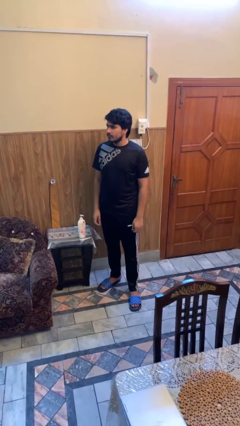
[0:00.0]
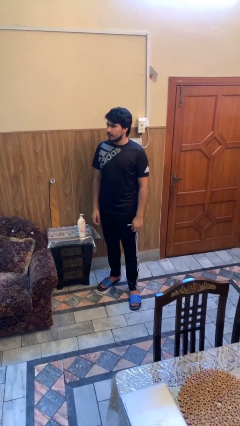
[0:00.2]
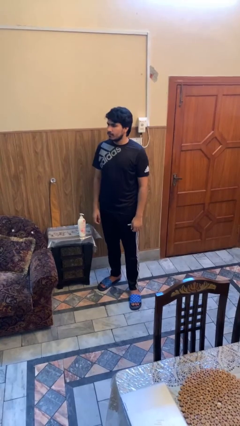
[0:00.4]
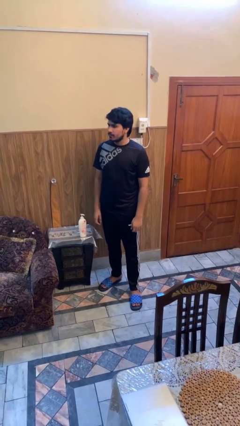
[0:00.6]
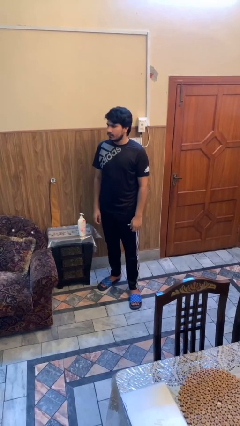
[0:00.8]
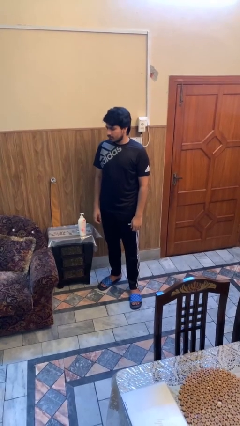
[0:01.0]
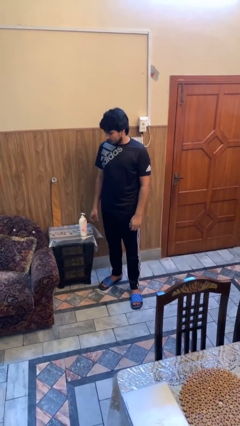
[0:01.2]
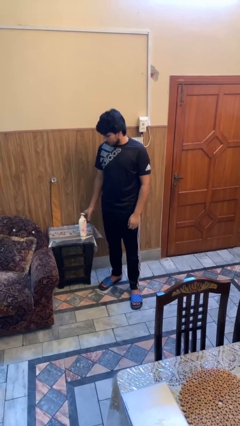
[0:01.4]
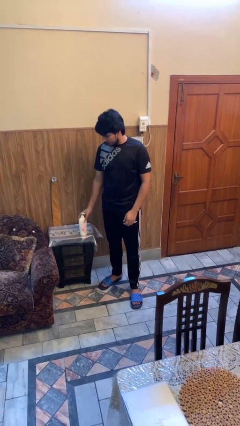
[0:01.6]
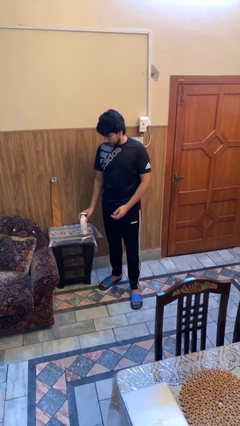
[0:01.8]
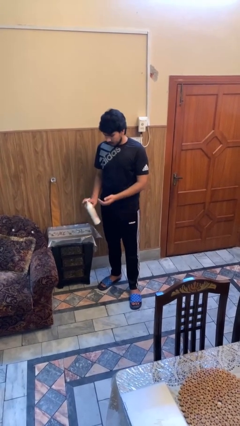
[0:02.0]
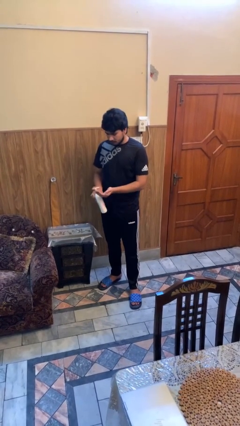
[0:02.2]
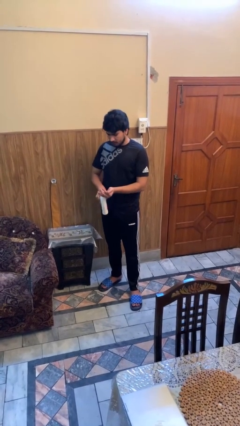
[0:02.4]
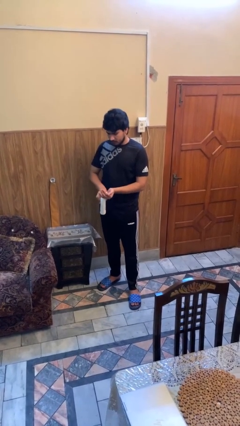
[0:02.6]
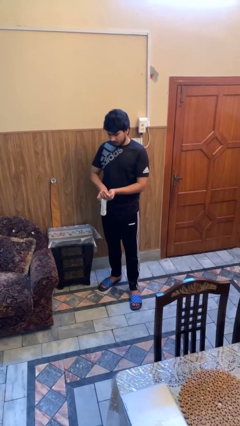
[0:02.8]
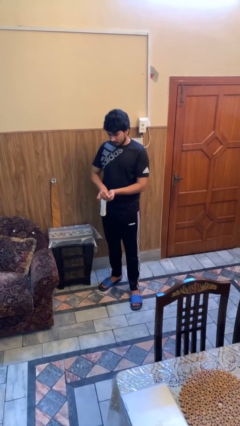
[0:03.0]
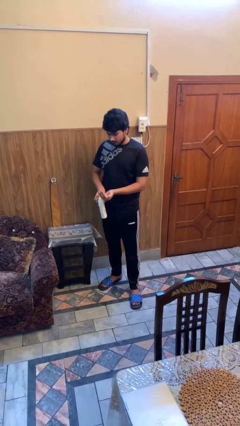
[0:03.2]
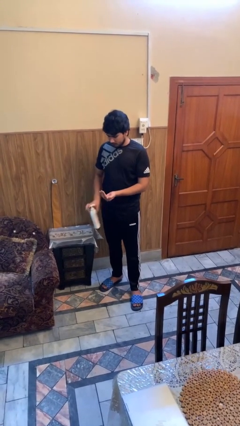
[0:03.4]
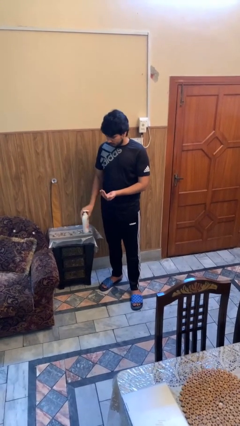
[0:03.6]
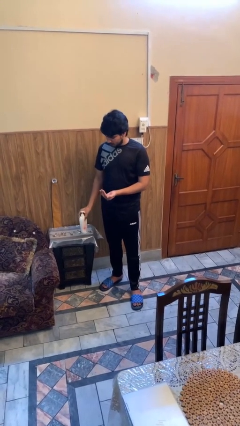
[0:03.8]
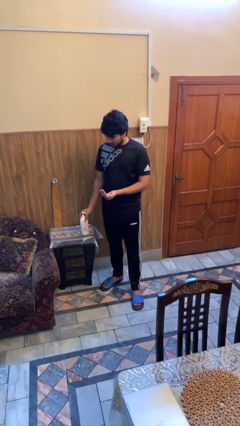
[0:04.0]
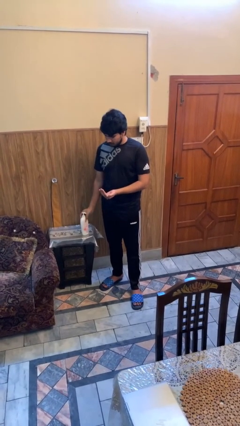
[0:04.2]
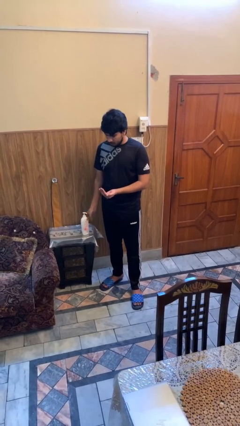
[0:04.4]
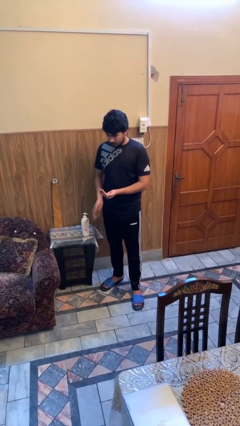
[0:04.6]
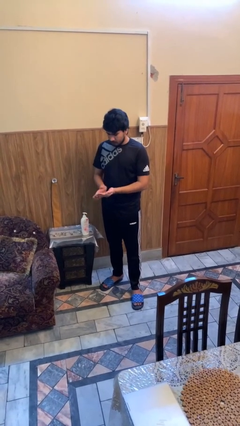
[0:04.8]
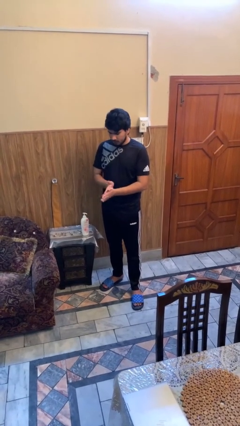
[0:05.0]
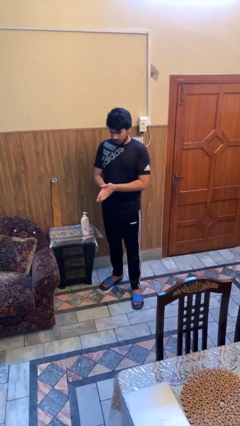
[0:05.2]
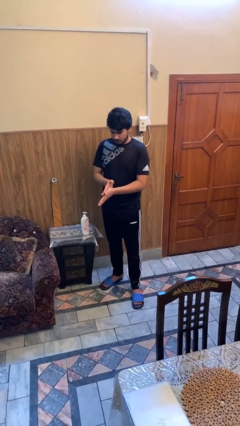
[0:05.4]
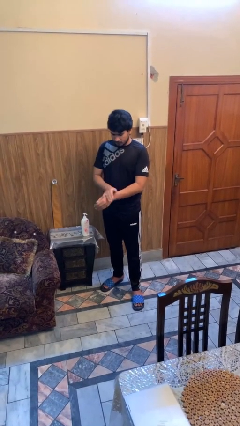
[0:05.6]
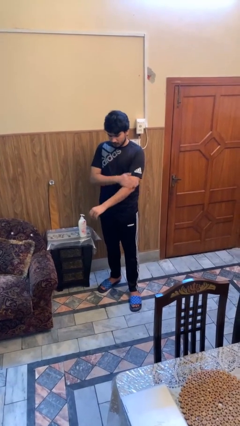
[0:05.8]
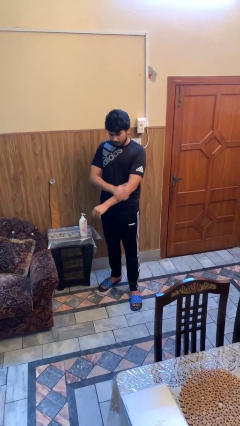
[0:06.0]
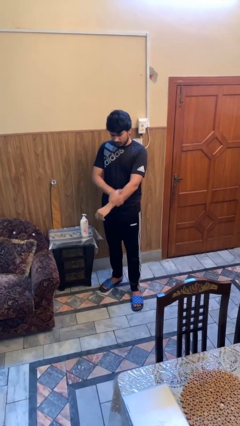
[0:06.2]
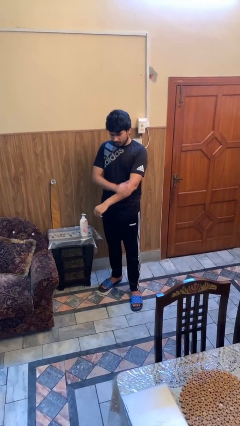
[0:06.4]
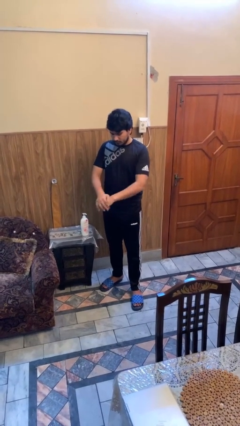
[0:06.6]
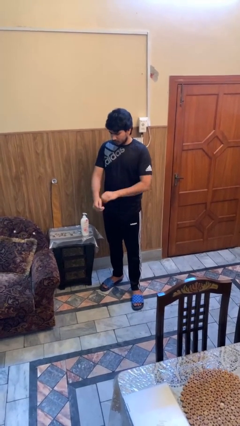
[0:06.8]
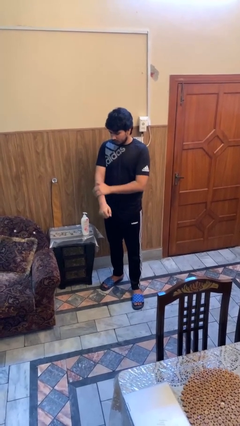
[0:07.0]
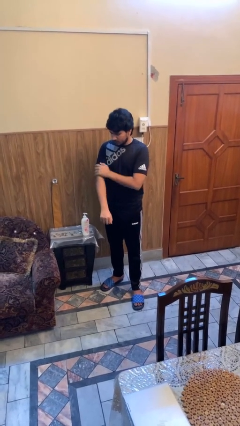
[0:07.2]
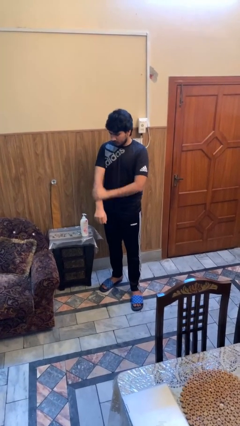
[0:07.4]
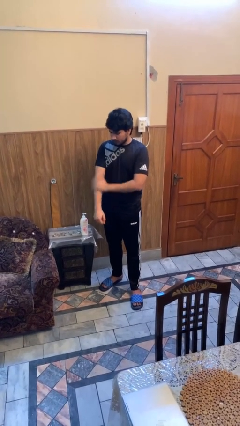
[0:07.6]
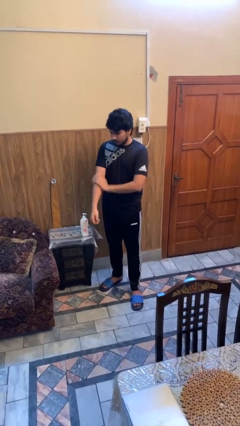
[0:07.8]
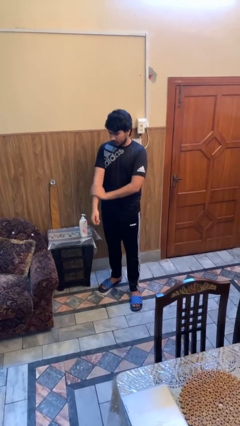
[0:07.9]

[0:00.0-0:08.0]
person applies sunscreen

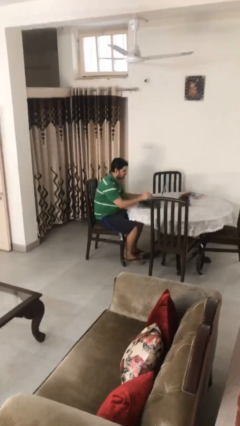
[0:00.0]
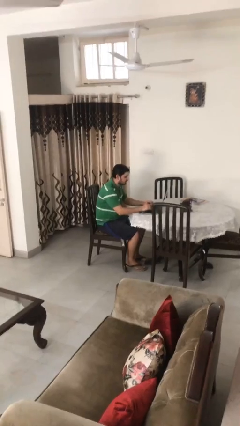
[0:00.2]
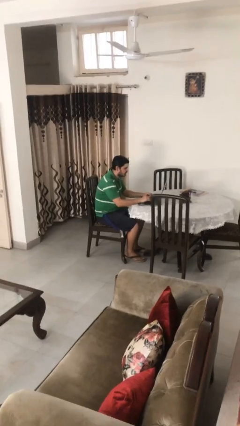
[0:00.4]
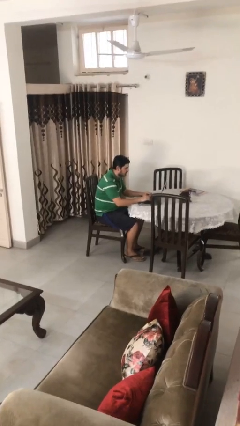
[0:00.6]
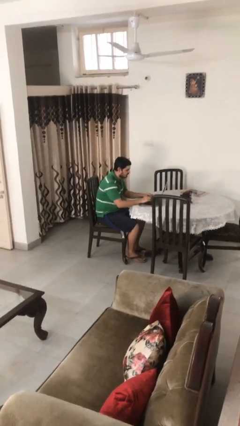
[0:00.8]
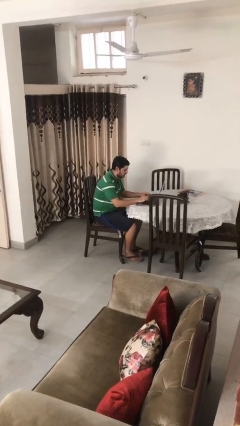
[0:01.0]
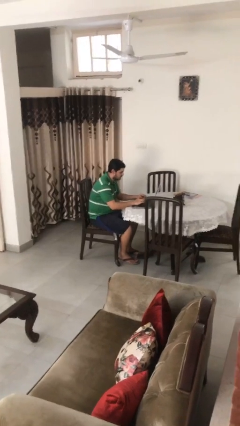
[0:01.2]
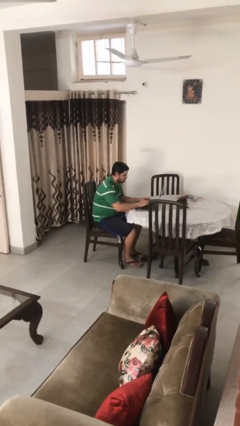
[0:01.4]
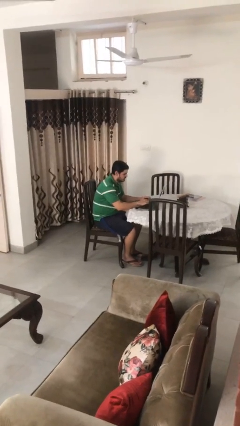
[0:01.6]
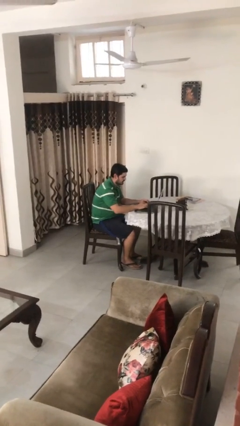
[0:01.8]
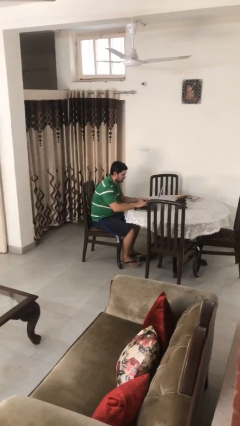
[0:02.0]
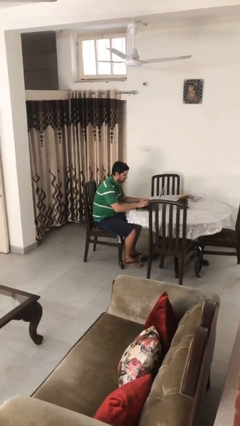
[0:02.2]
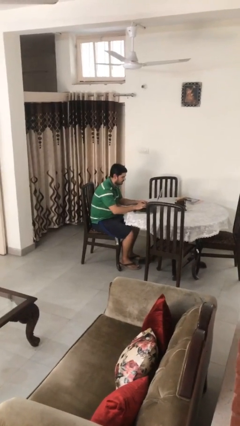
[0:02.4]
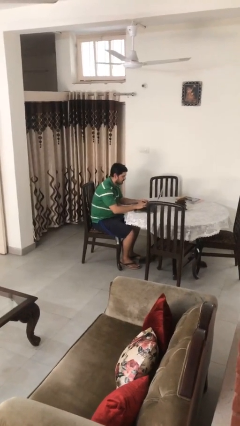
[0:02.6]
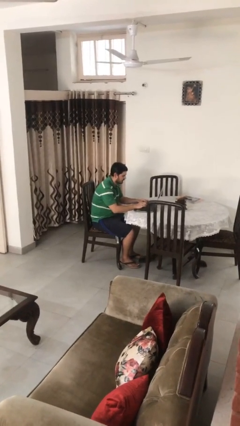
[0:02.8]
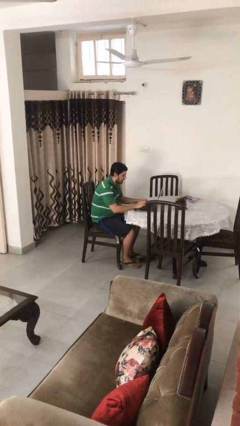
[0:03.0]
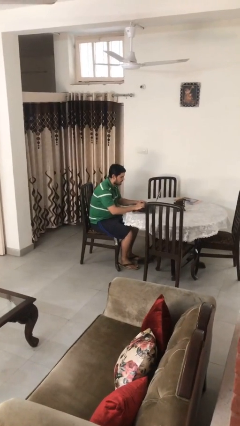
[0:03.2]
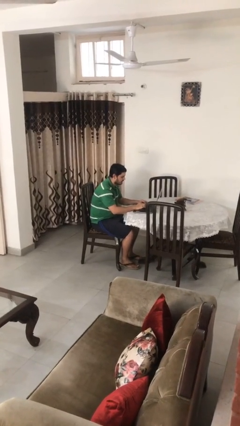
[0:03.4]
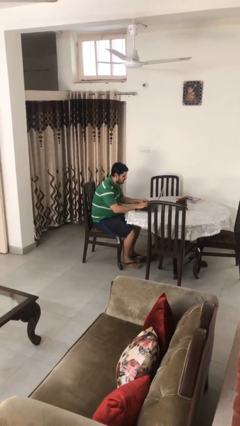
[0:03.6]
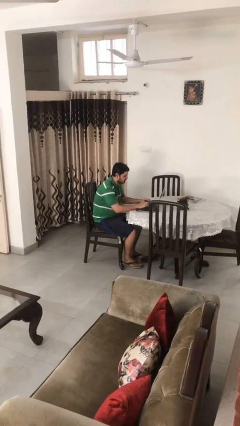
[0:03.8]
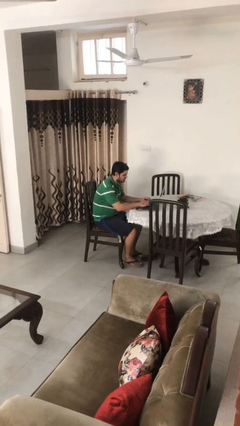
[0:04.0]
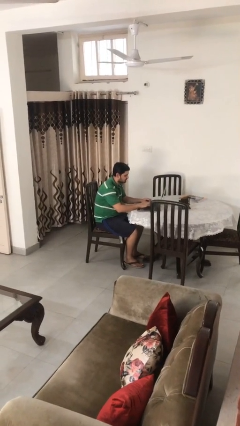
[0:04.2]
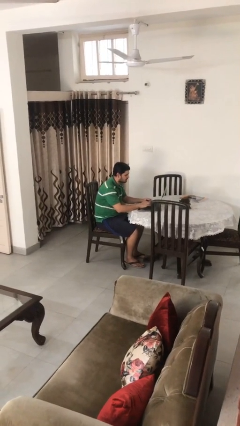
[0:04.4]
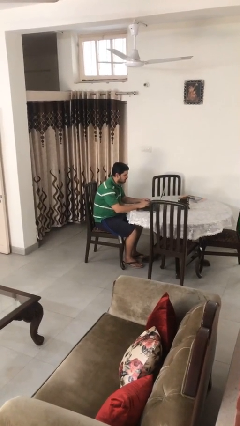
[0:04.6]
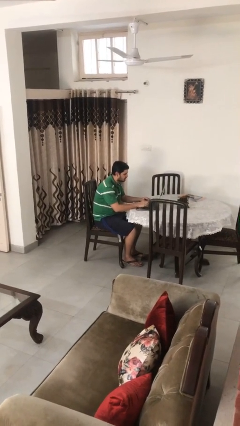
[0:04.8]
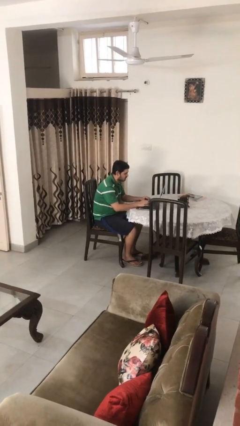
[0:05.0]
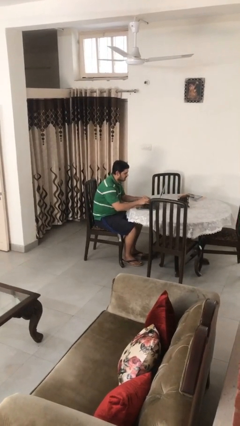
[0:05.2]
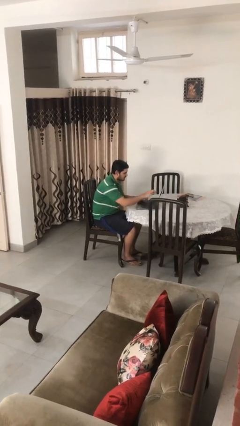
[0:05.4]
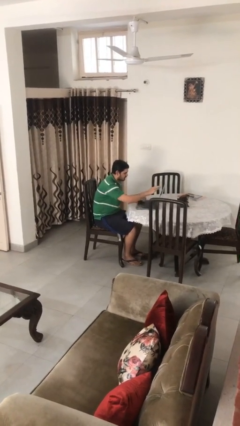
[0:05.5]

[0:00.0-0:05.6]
person interacts with laptop

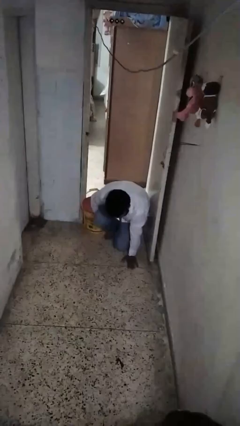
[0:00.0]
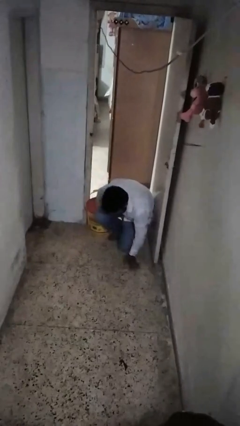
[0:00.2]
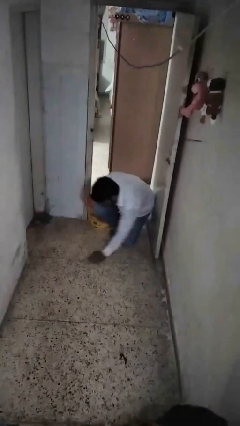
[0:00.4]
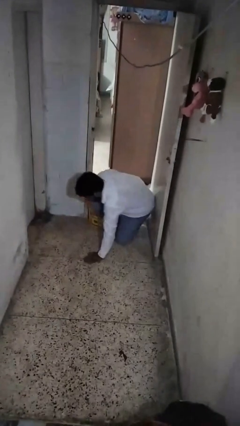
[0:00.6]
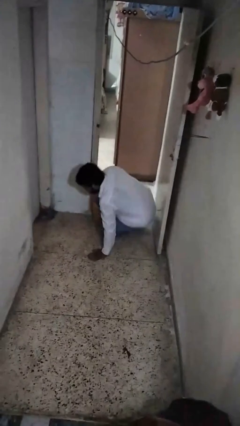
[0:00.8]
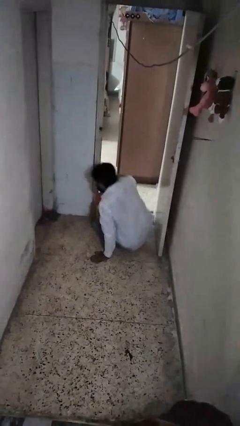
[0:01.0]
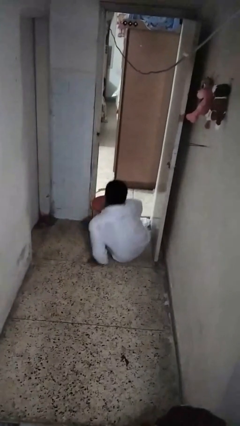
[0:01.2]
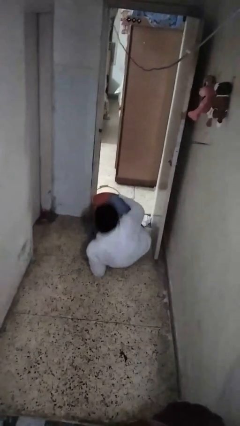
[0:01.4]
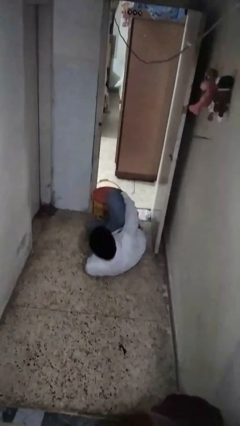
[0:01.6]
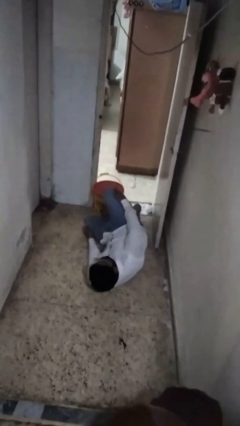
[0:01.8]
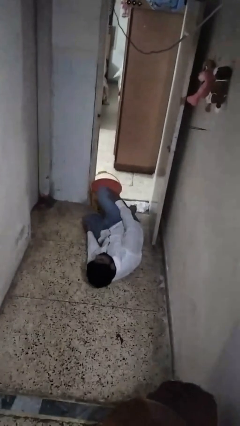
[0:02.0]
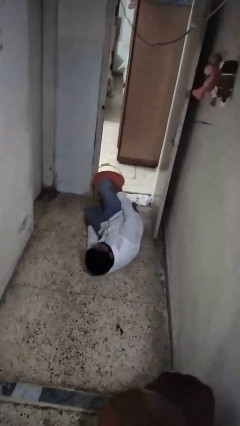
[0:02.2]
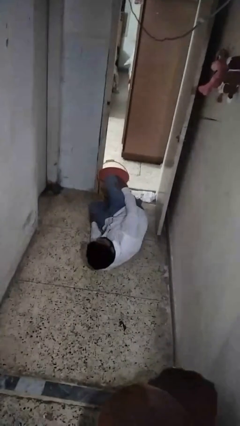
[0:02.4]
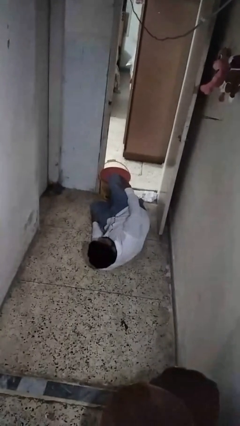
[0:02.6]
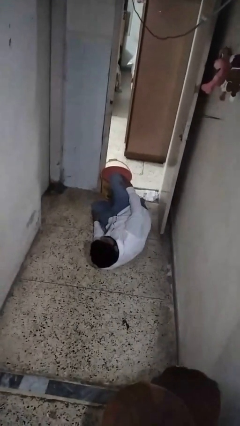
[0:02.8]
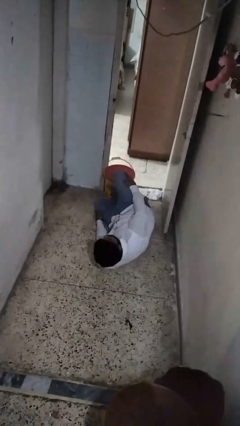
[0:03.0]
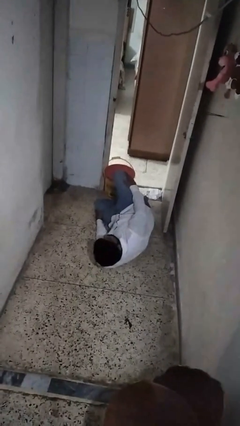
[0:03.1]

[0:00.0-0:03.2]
person lies down on floor

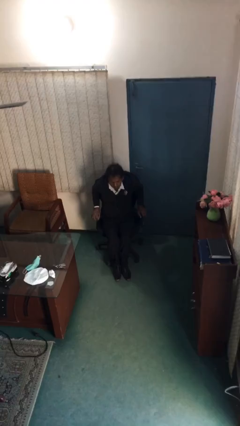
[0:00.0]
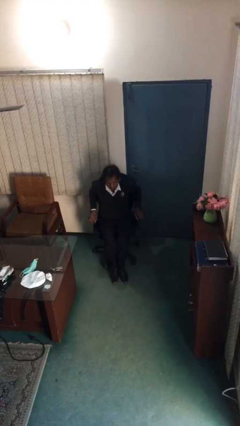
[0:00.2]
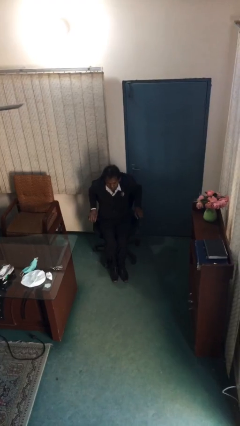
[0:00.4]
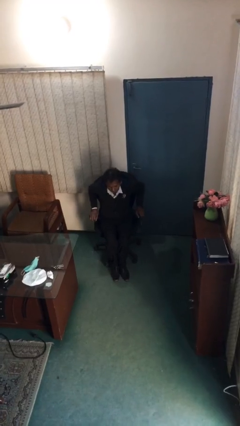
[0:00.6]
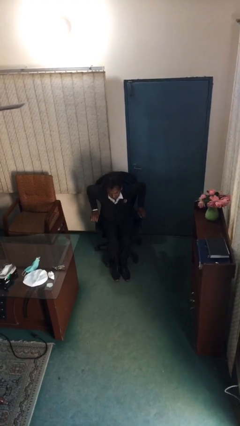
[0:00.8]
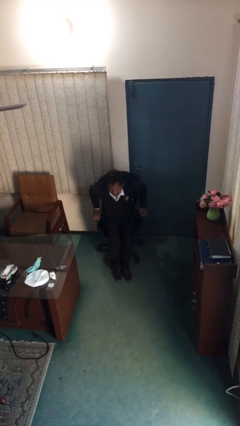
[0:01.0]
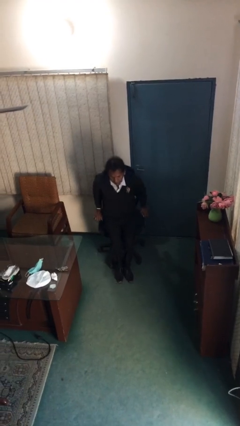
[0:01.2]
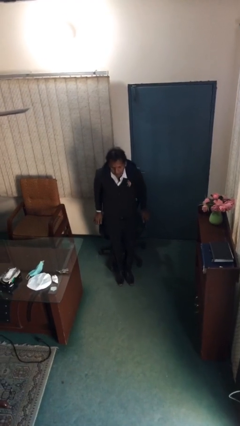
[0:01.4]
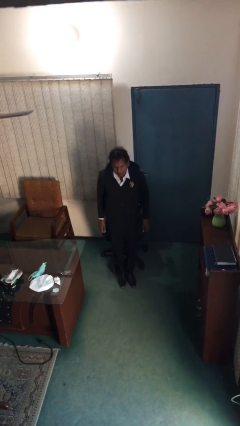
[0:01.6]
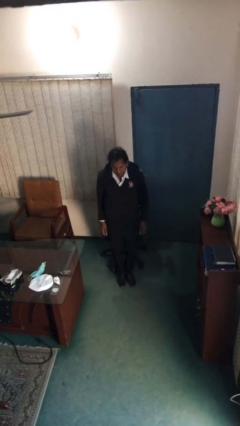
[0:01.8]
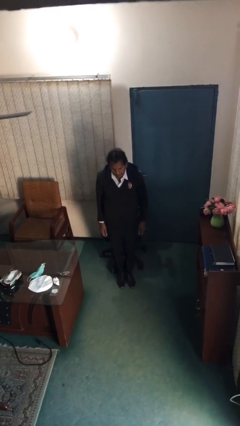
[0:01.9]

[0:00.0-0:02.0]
person stands up
